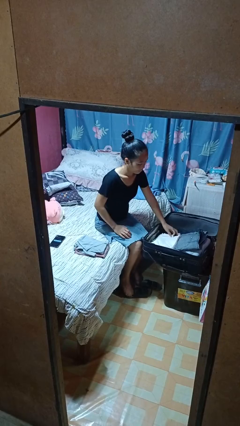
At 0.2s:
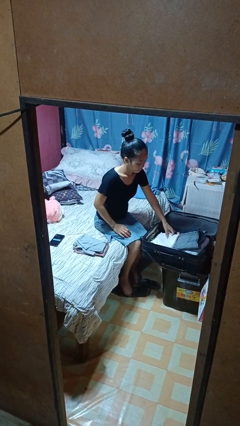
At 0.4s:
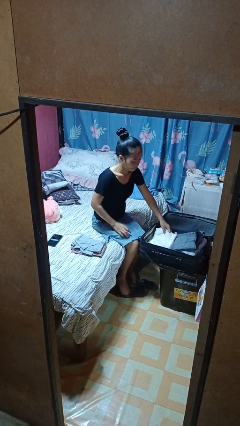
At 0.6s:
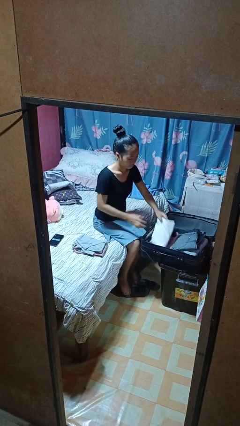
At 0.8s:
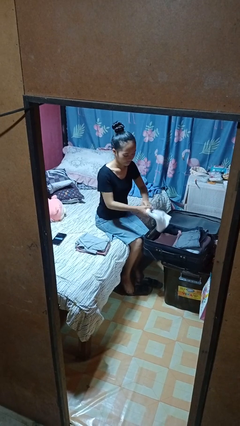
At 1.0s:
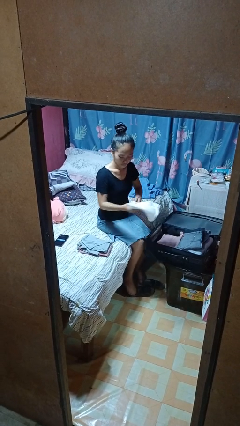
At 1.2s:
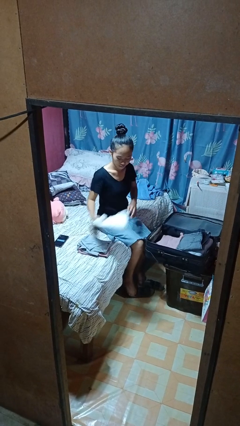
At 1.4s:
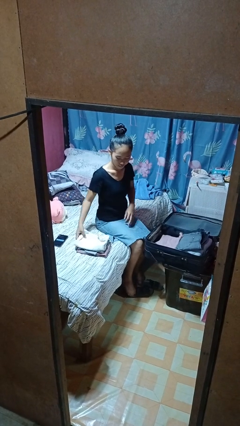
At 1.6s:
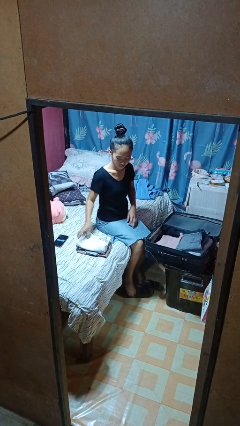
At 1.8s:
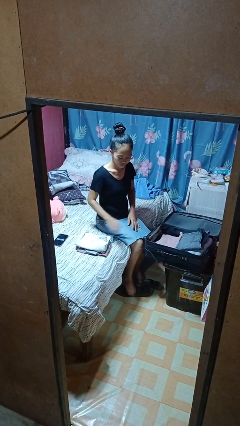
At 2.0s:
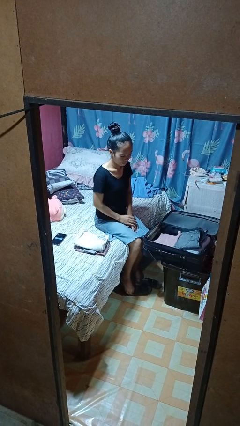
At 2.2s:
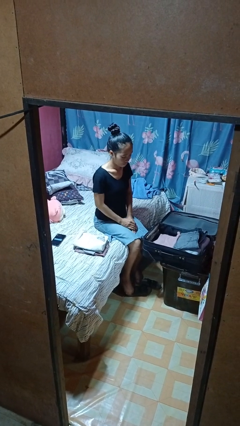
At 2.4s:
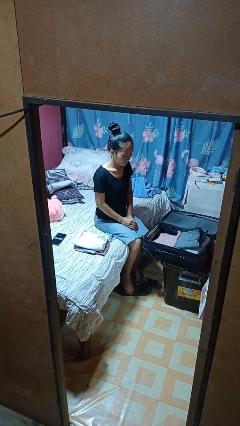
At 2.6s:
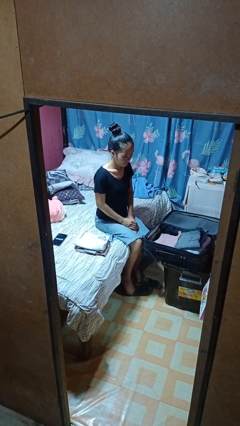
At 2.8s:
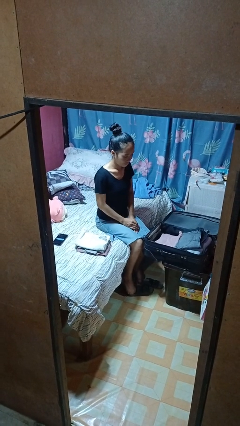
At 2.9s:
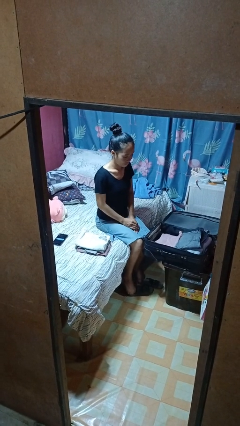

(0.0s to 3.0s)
person unloads clothes from suitcase

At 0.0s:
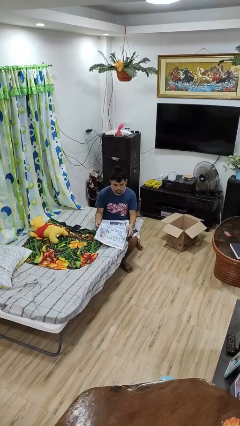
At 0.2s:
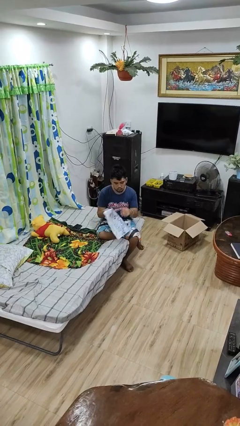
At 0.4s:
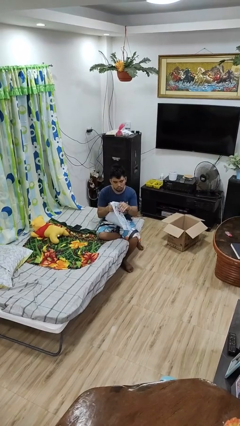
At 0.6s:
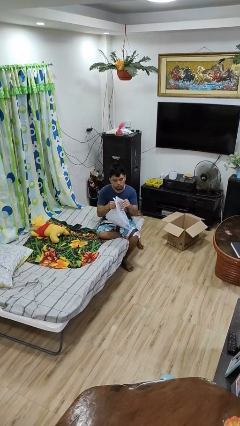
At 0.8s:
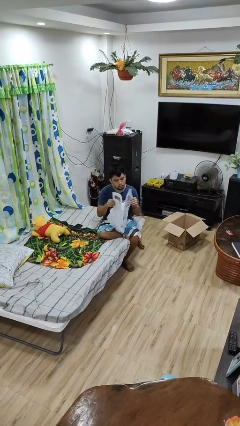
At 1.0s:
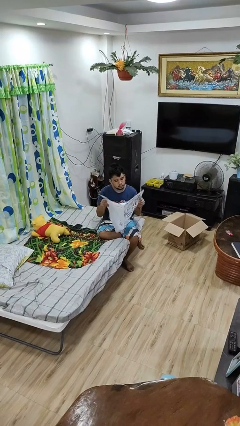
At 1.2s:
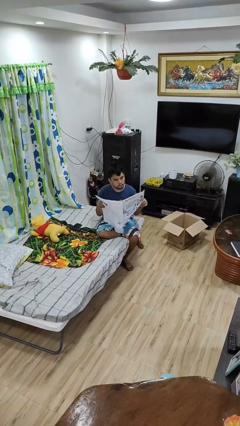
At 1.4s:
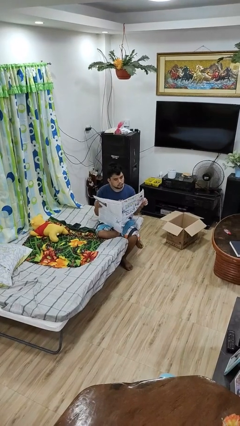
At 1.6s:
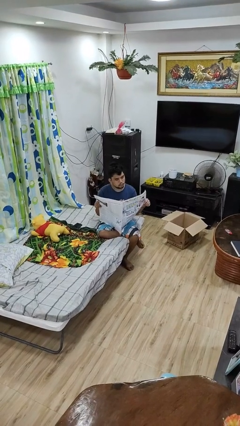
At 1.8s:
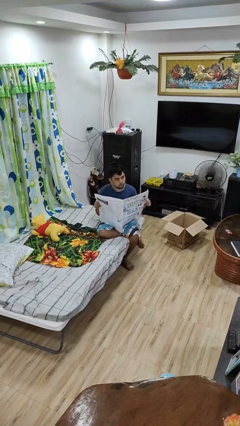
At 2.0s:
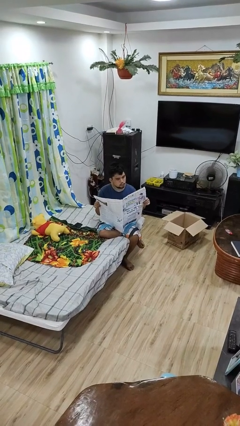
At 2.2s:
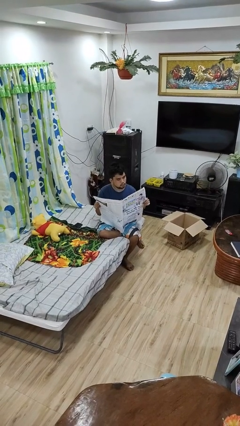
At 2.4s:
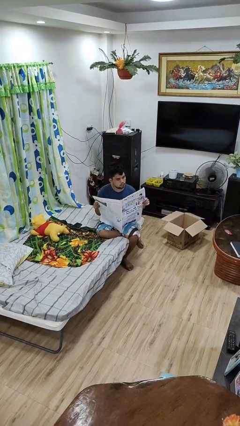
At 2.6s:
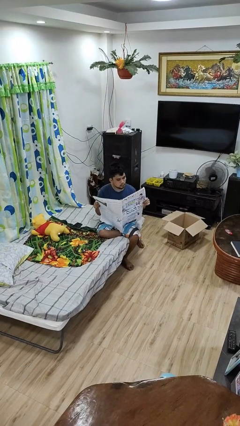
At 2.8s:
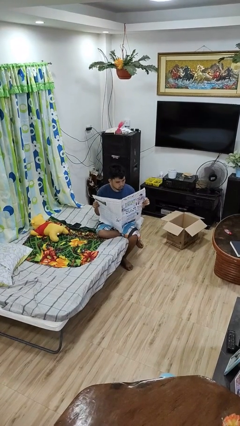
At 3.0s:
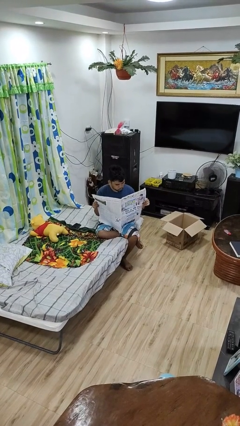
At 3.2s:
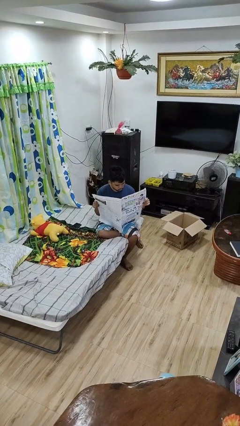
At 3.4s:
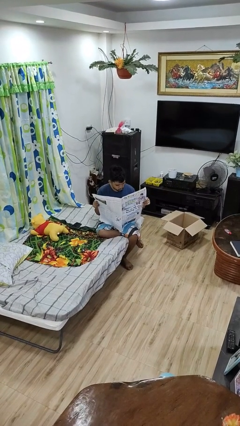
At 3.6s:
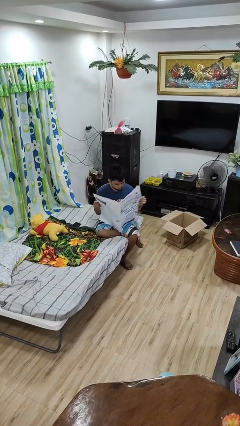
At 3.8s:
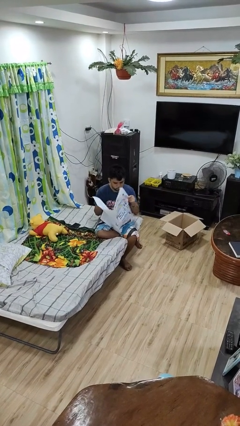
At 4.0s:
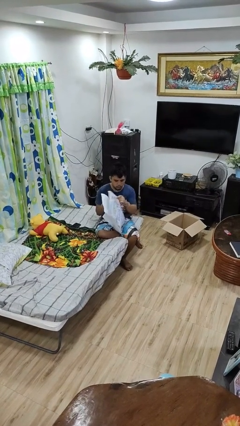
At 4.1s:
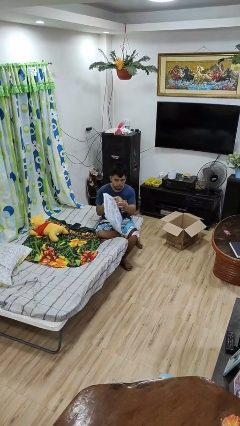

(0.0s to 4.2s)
person reads newspaper

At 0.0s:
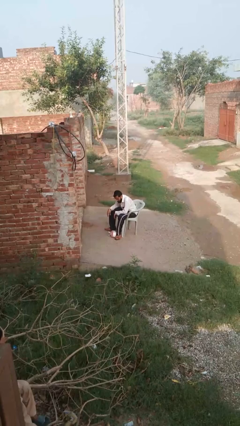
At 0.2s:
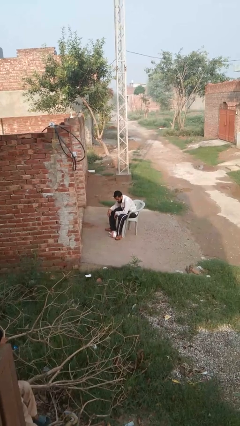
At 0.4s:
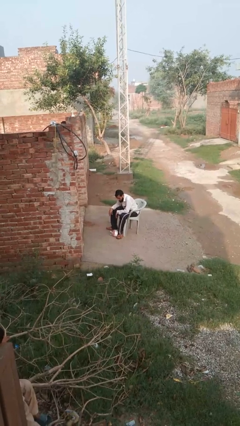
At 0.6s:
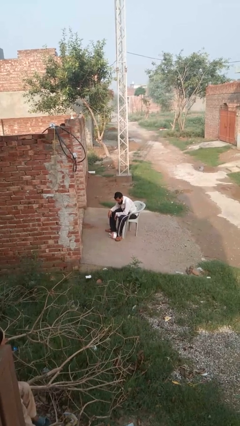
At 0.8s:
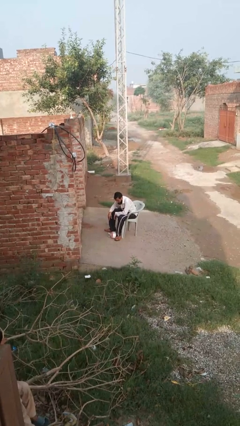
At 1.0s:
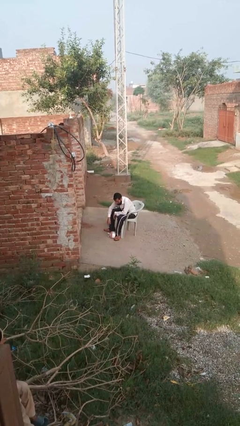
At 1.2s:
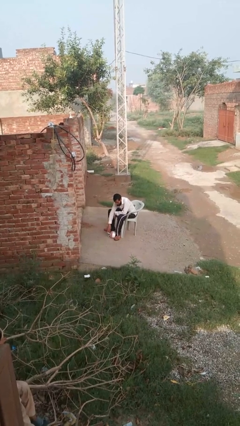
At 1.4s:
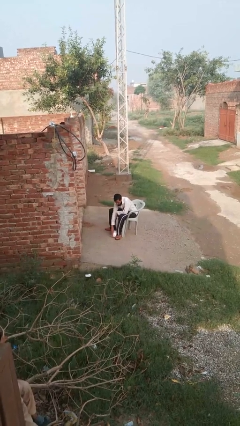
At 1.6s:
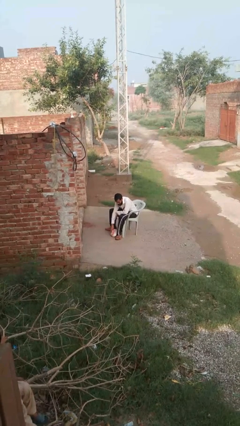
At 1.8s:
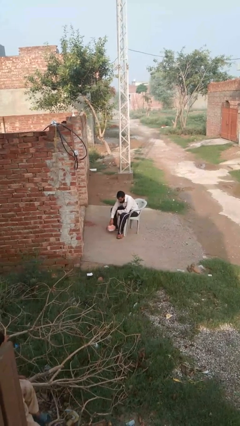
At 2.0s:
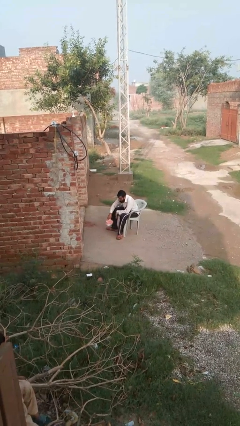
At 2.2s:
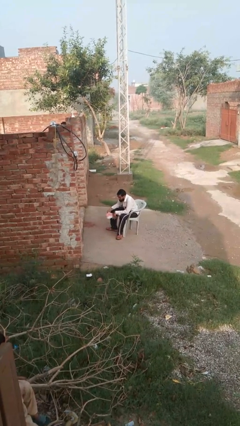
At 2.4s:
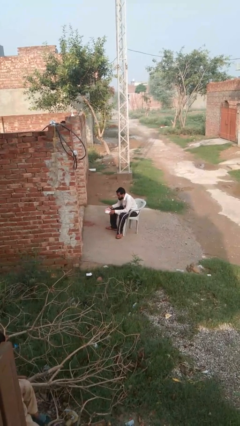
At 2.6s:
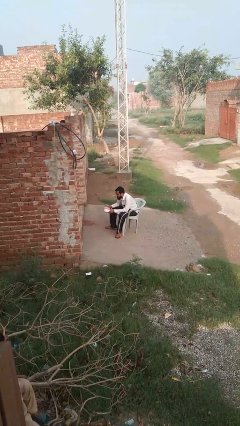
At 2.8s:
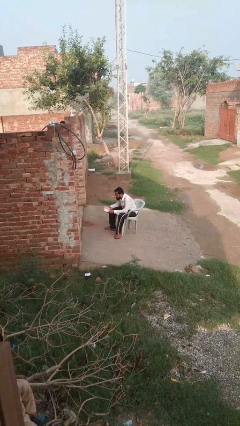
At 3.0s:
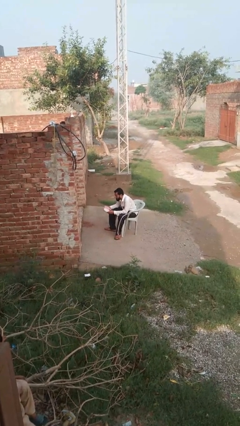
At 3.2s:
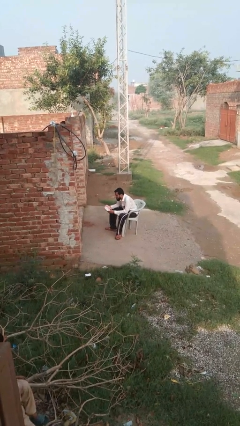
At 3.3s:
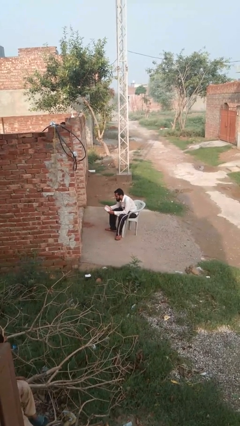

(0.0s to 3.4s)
person picks up object from floor

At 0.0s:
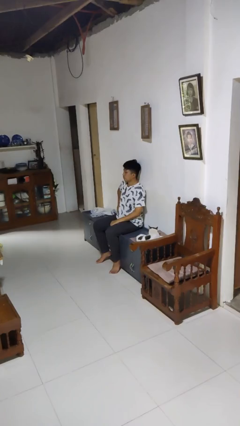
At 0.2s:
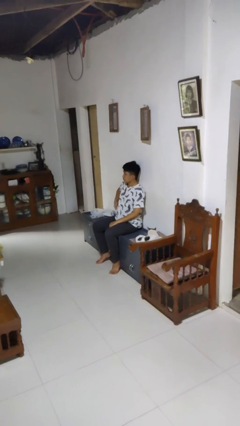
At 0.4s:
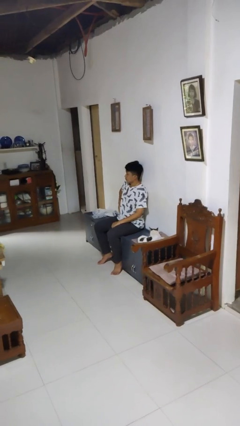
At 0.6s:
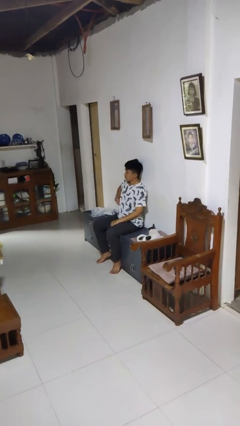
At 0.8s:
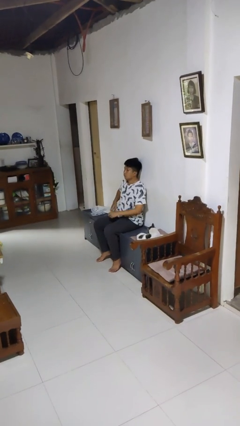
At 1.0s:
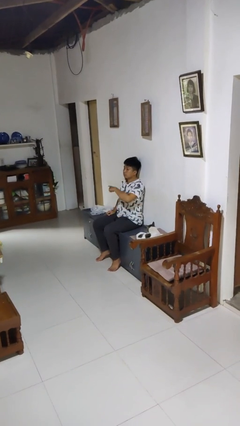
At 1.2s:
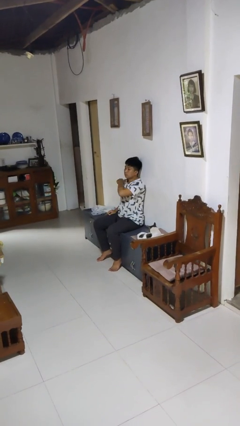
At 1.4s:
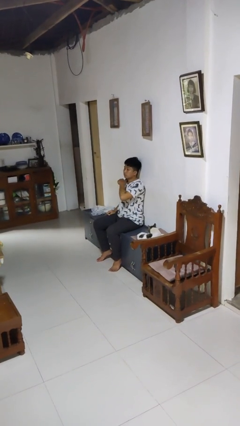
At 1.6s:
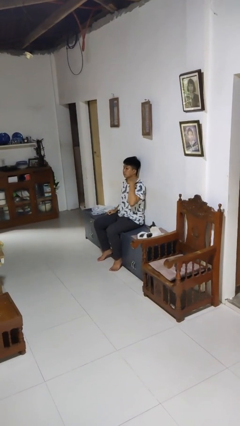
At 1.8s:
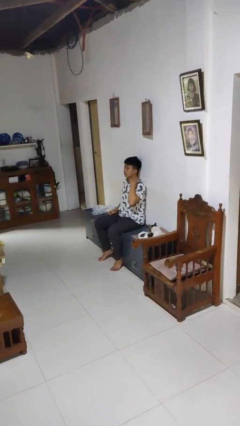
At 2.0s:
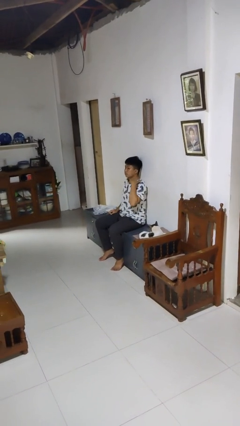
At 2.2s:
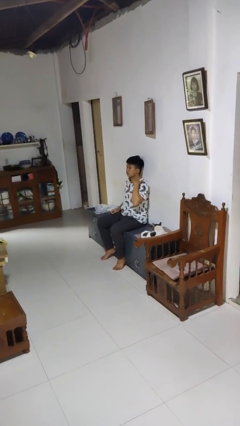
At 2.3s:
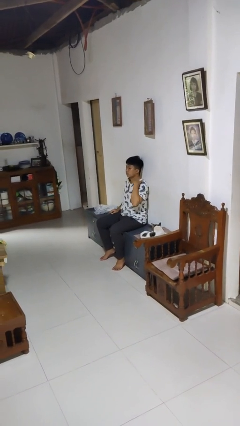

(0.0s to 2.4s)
person gestures cut

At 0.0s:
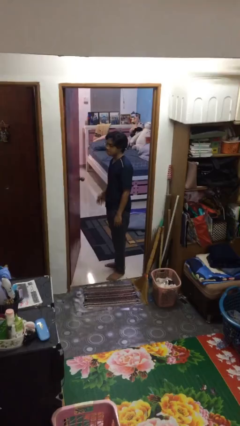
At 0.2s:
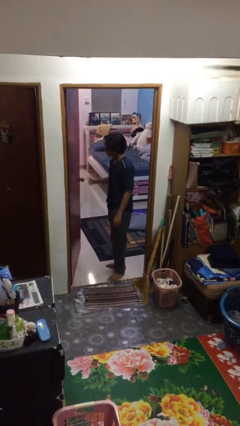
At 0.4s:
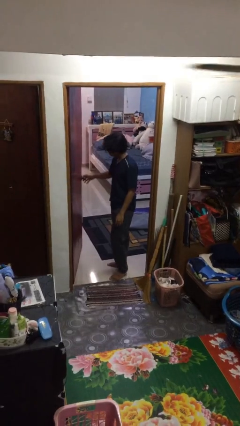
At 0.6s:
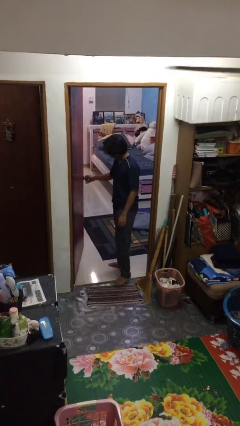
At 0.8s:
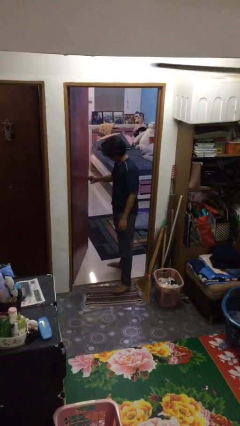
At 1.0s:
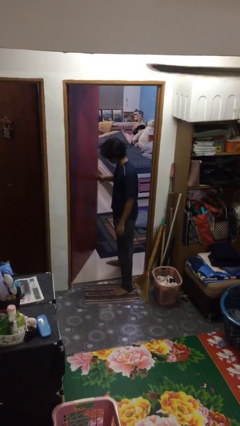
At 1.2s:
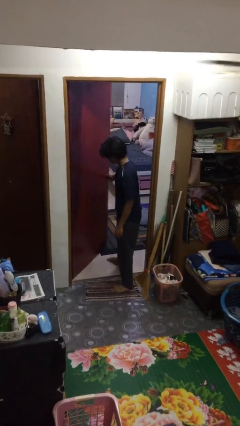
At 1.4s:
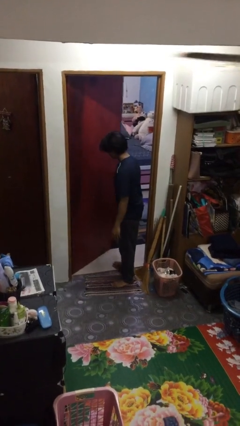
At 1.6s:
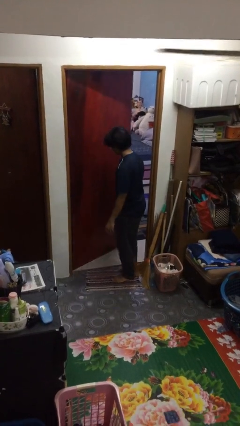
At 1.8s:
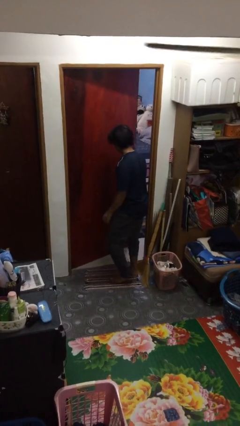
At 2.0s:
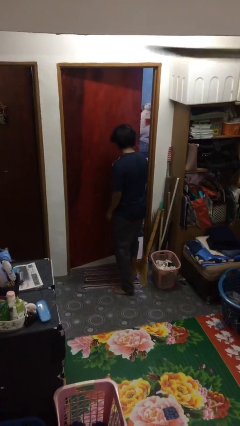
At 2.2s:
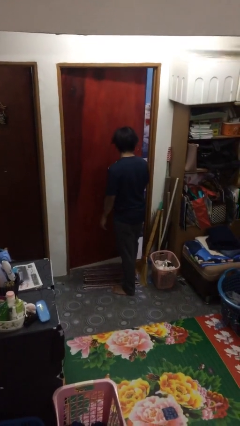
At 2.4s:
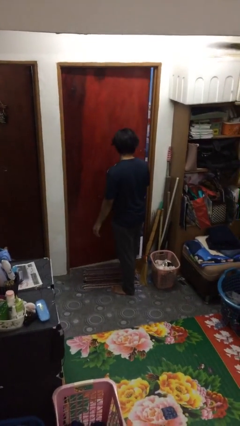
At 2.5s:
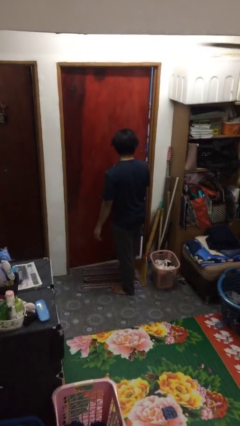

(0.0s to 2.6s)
person closes facility door

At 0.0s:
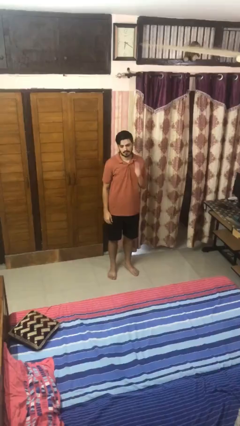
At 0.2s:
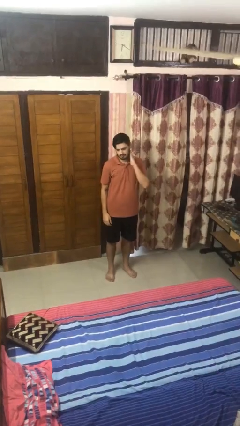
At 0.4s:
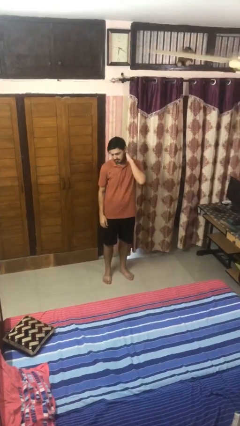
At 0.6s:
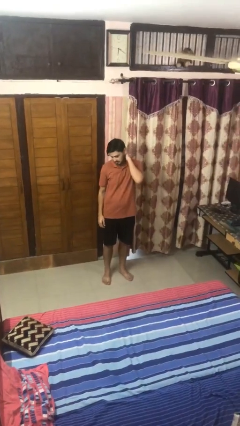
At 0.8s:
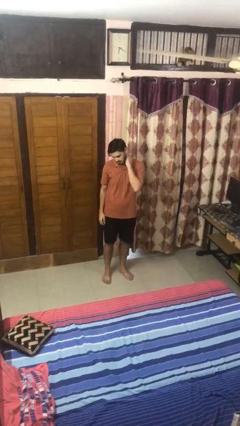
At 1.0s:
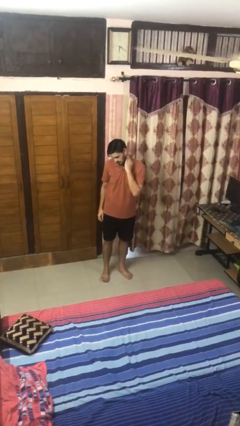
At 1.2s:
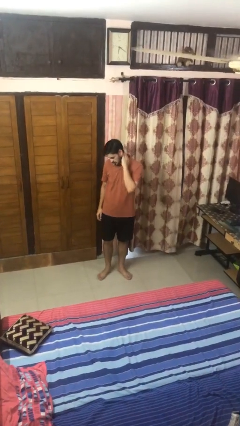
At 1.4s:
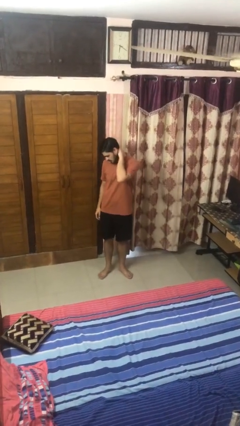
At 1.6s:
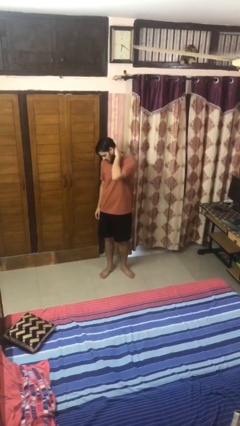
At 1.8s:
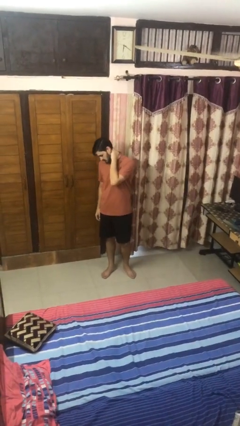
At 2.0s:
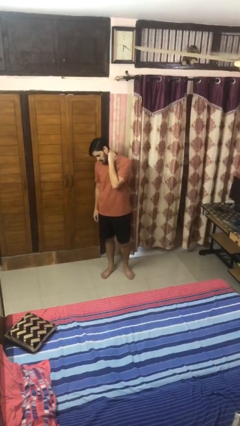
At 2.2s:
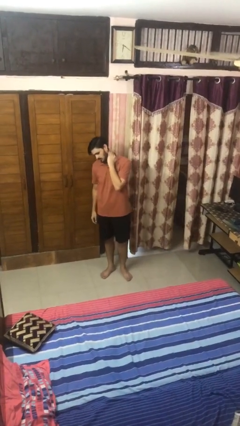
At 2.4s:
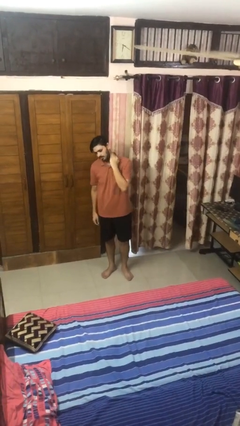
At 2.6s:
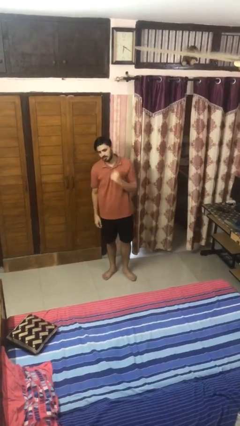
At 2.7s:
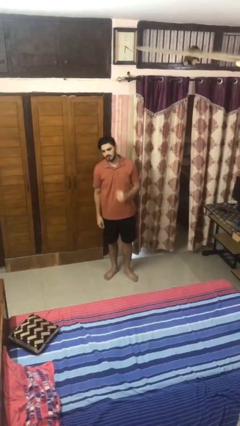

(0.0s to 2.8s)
person rubs neck
